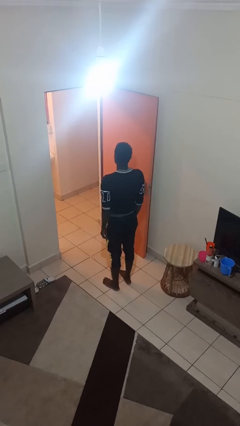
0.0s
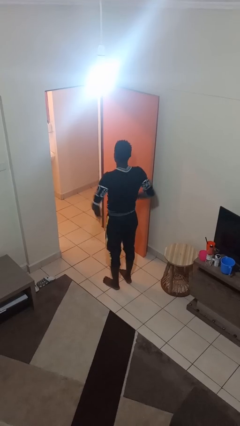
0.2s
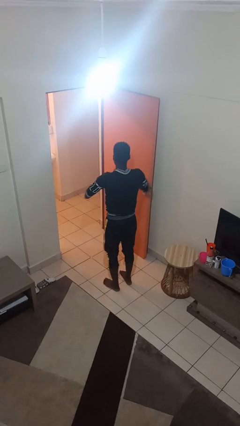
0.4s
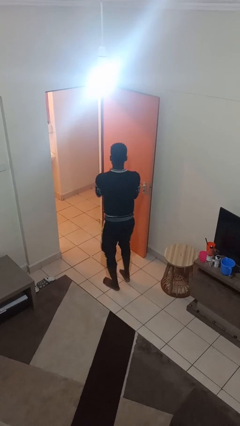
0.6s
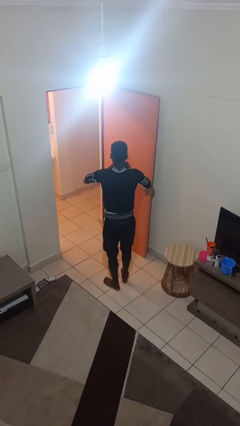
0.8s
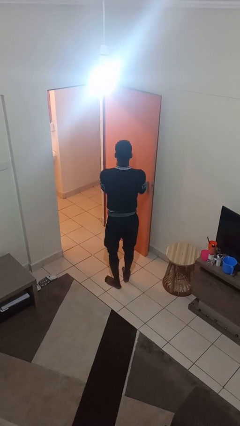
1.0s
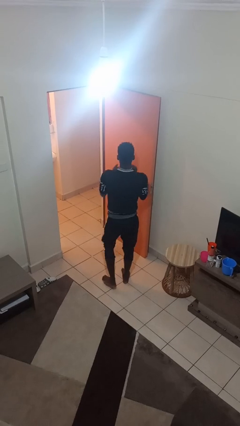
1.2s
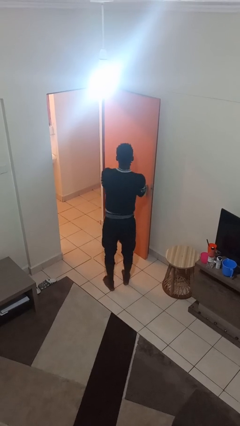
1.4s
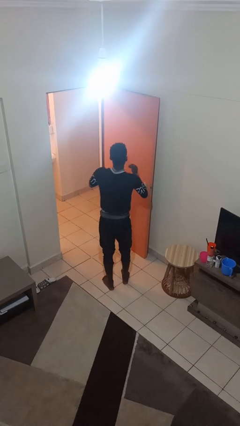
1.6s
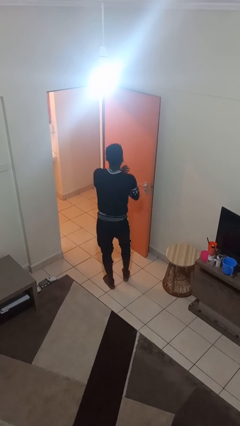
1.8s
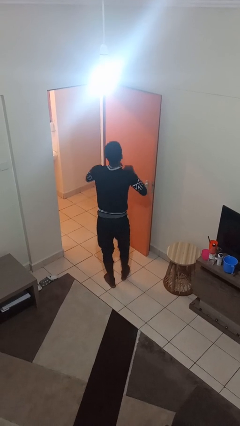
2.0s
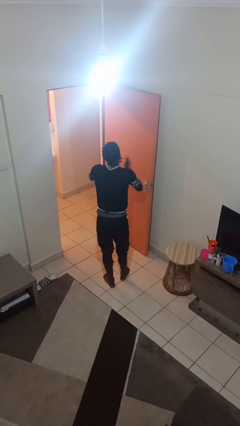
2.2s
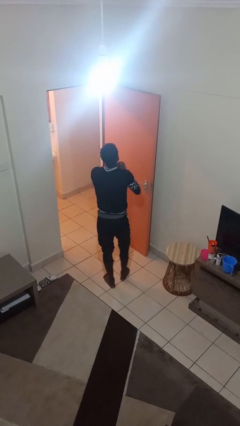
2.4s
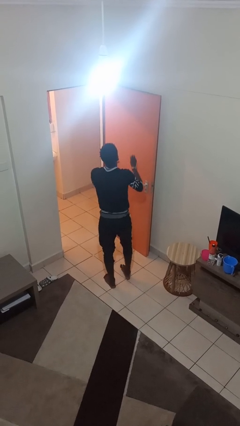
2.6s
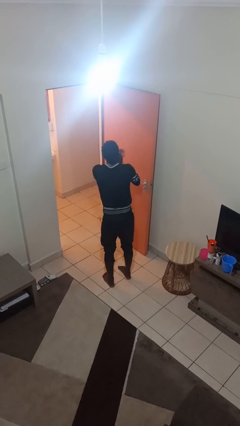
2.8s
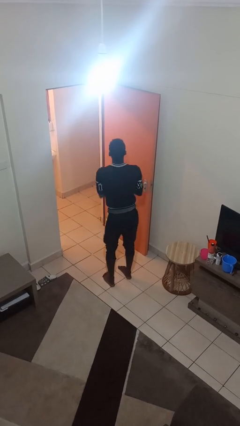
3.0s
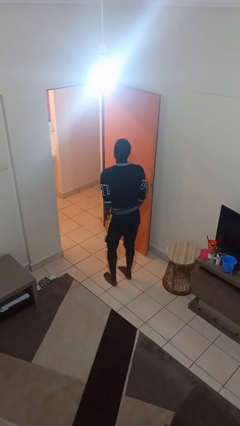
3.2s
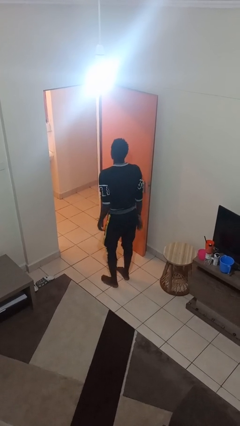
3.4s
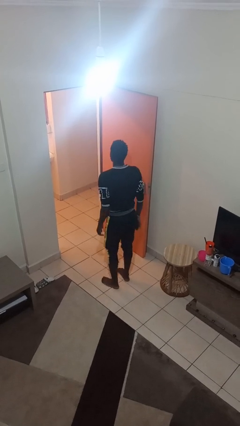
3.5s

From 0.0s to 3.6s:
person claps hands

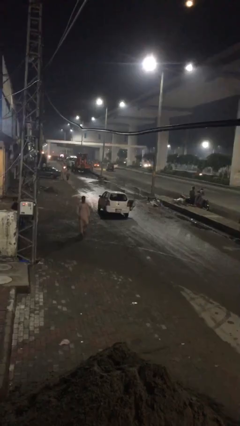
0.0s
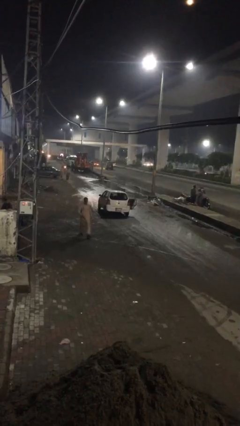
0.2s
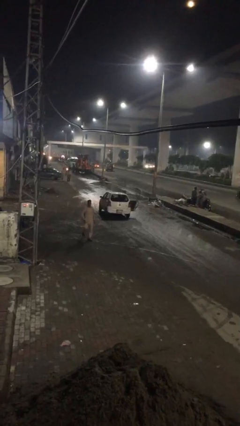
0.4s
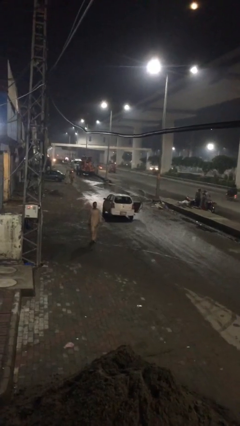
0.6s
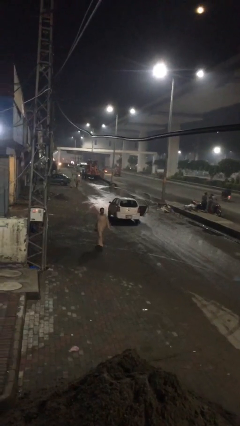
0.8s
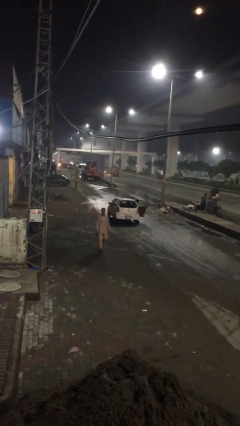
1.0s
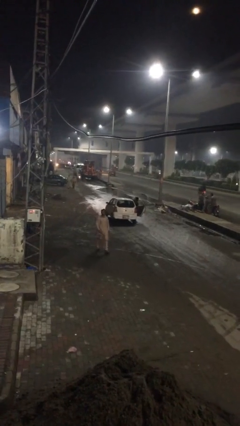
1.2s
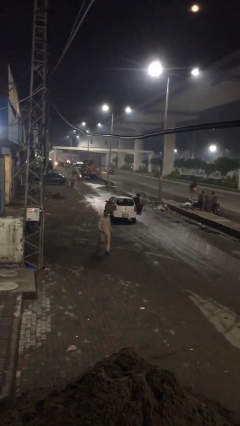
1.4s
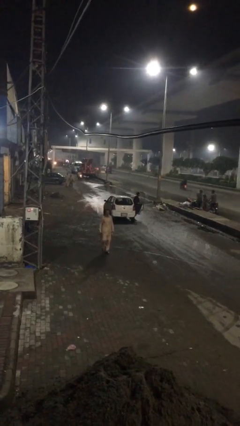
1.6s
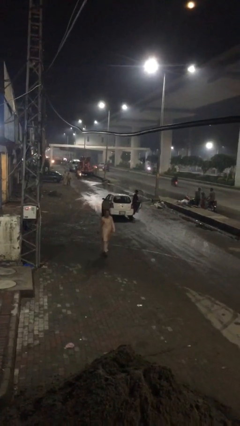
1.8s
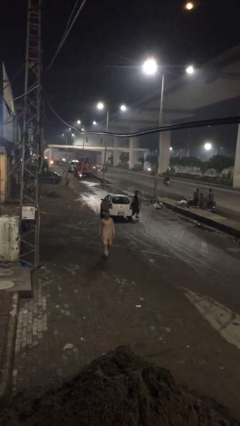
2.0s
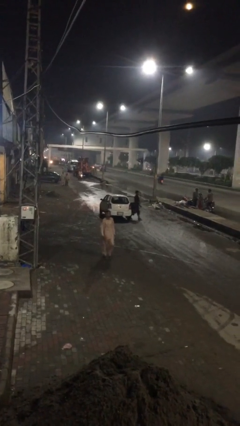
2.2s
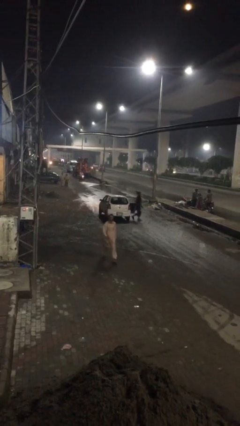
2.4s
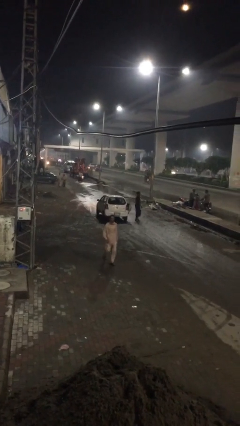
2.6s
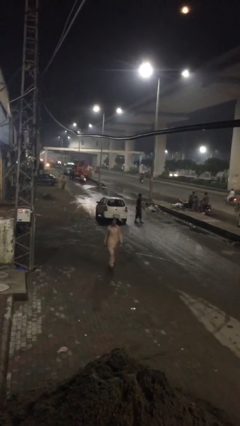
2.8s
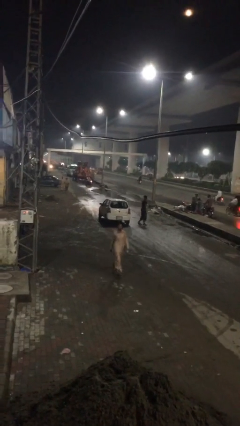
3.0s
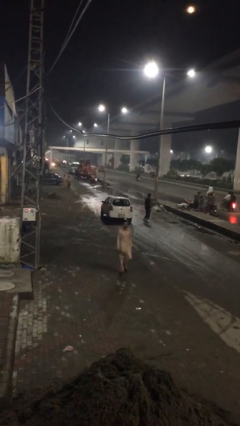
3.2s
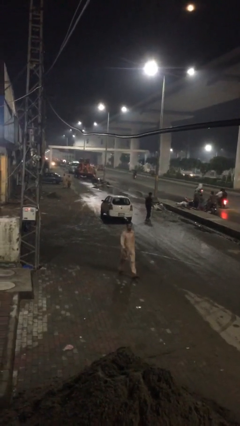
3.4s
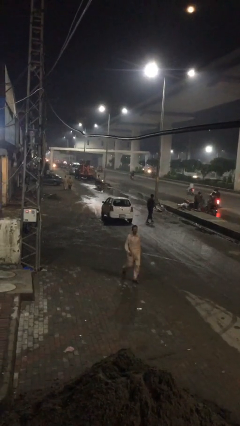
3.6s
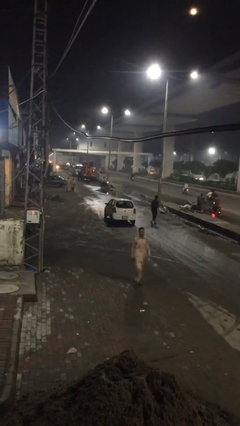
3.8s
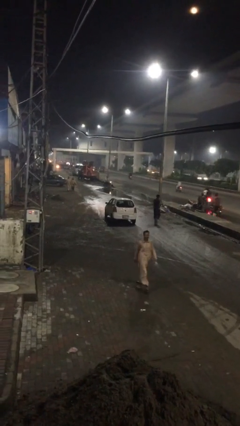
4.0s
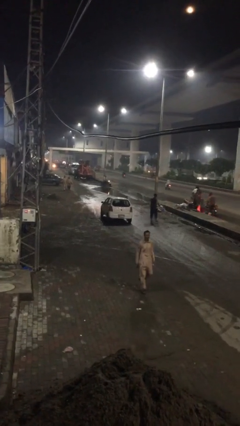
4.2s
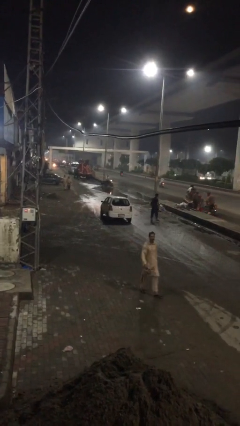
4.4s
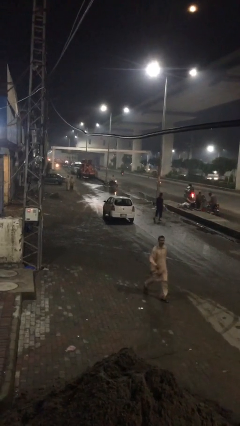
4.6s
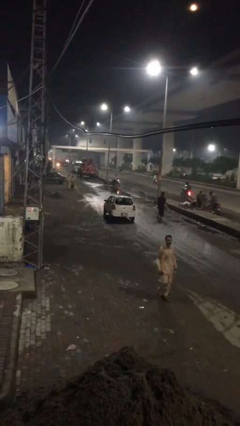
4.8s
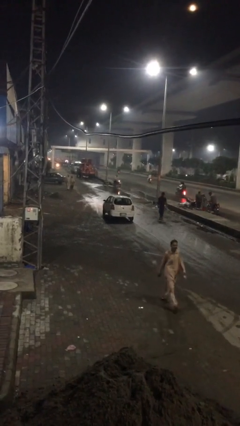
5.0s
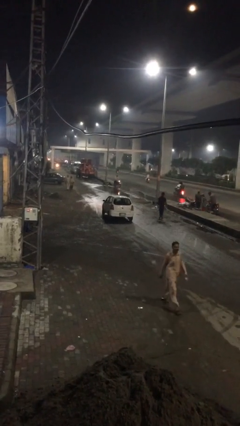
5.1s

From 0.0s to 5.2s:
car drops off person

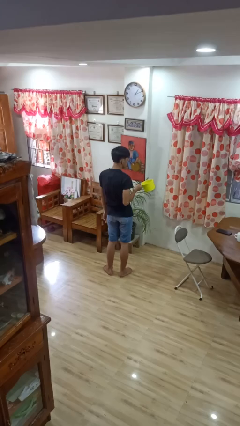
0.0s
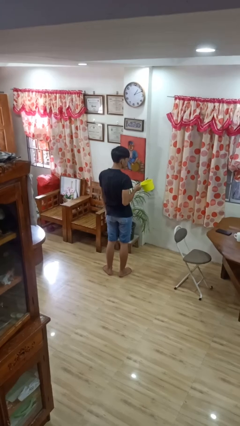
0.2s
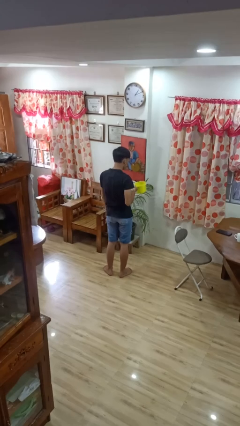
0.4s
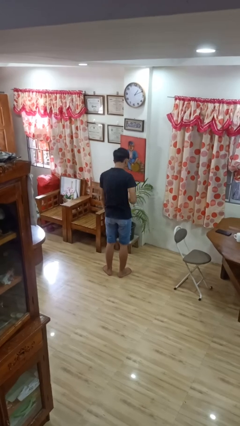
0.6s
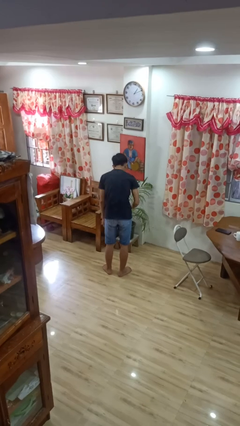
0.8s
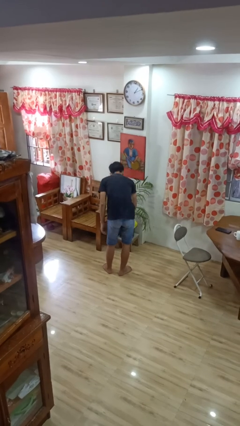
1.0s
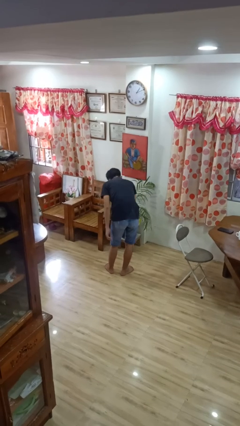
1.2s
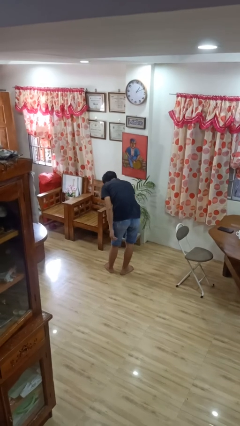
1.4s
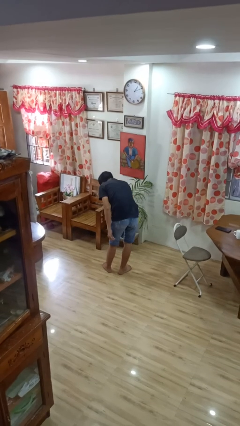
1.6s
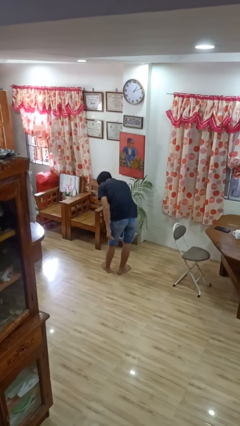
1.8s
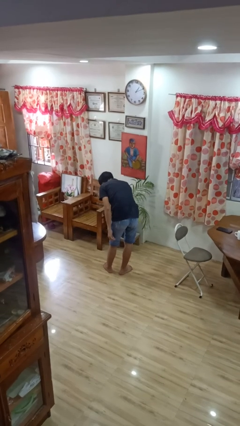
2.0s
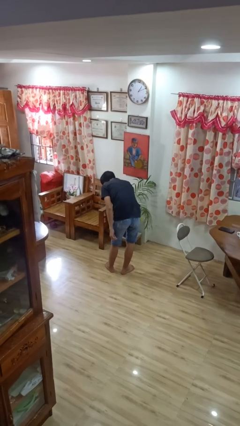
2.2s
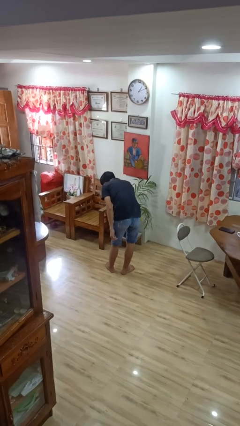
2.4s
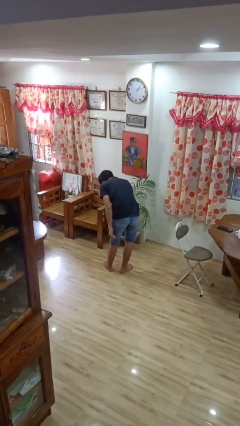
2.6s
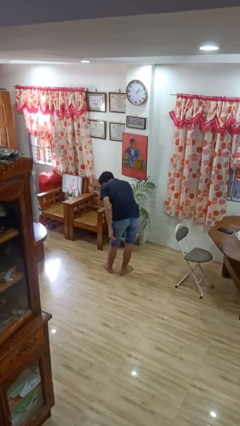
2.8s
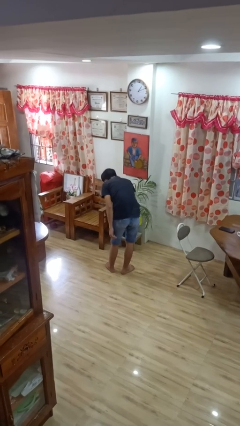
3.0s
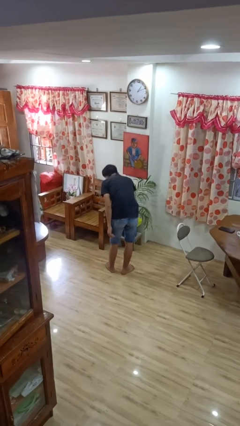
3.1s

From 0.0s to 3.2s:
person waters houseplant

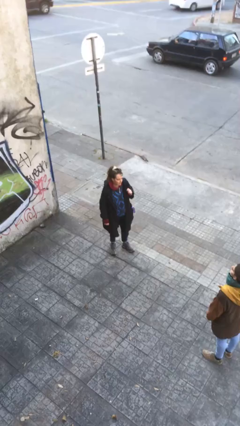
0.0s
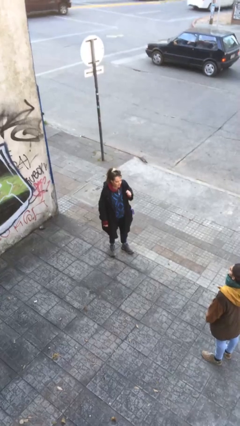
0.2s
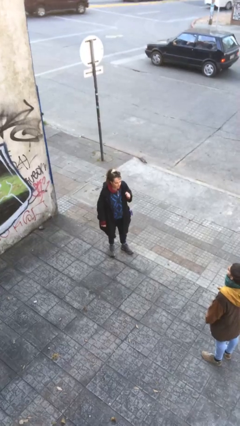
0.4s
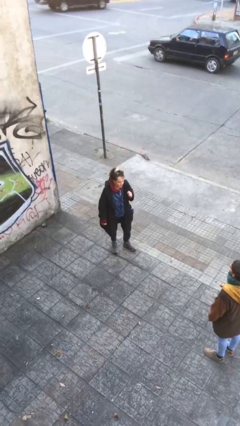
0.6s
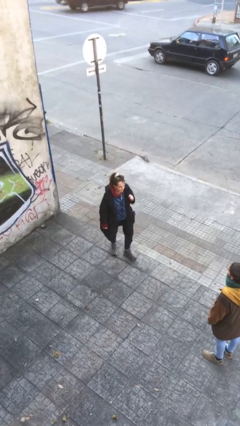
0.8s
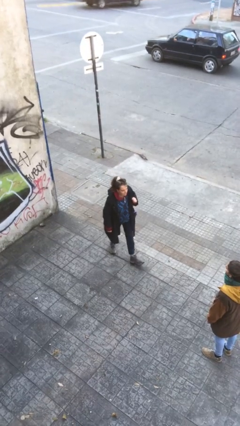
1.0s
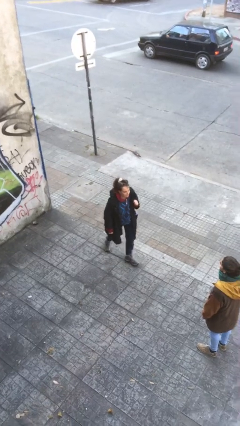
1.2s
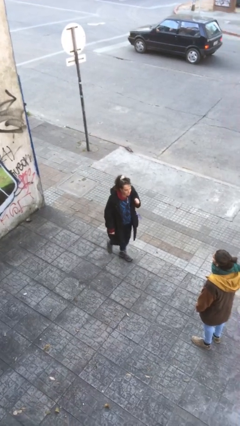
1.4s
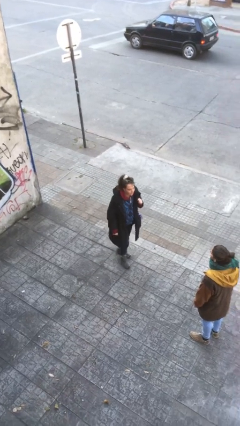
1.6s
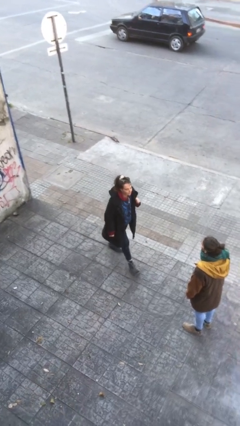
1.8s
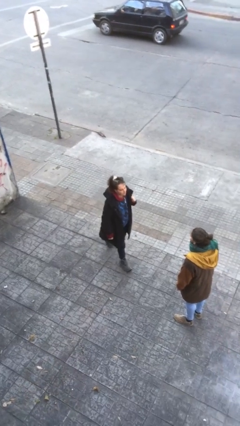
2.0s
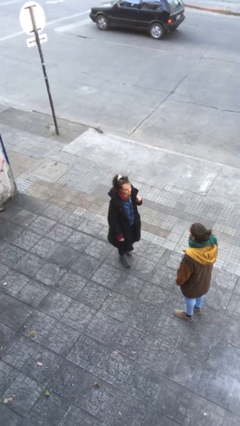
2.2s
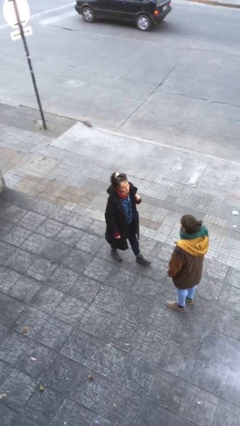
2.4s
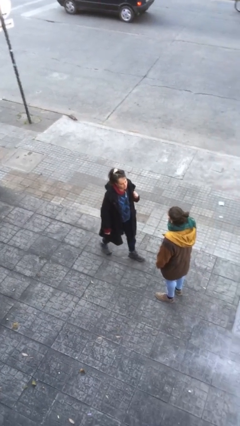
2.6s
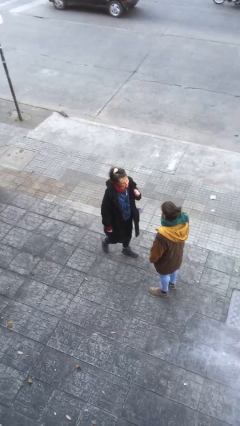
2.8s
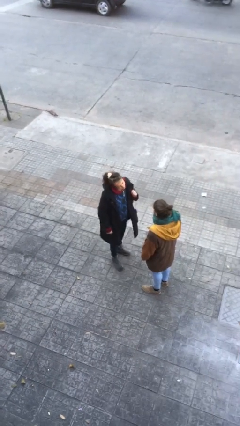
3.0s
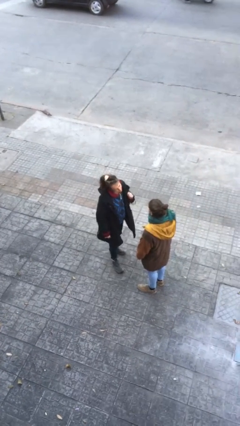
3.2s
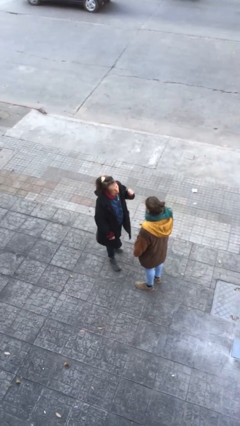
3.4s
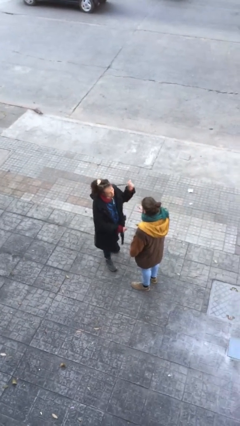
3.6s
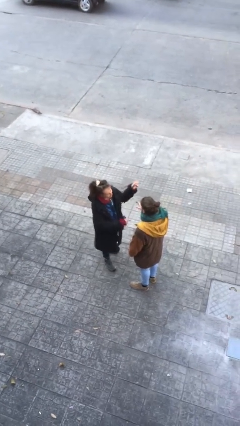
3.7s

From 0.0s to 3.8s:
person transfers object to person

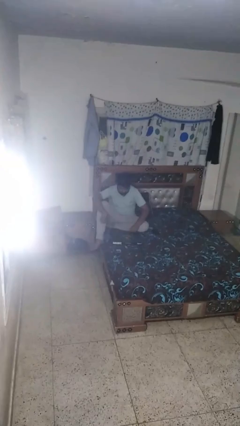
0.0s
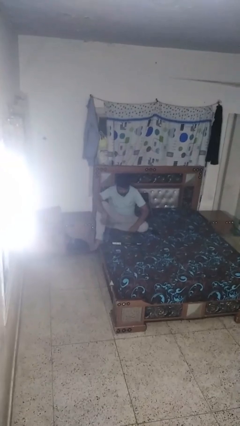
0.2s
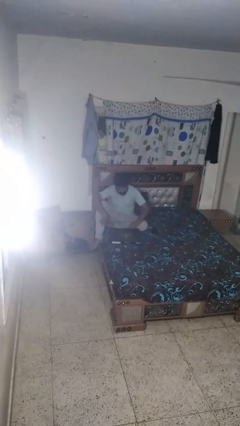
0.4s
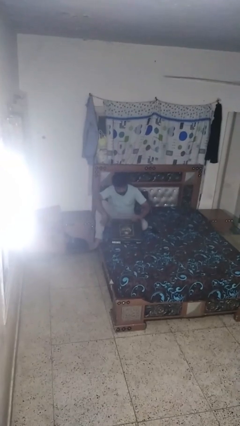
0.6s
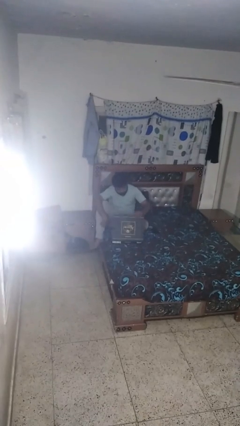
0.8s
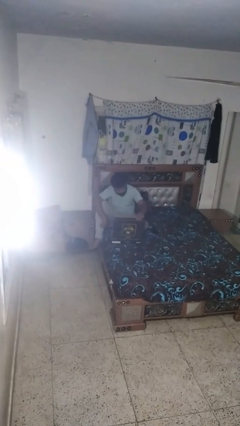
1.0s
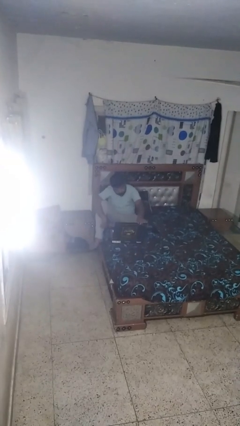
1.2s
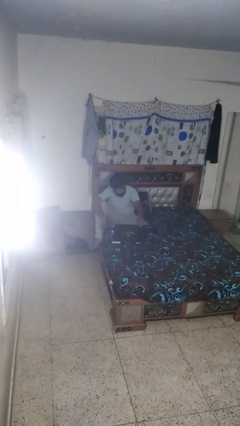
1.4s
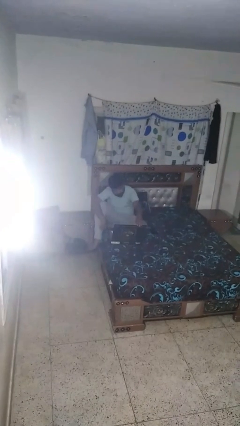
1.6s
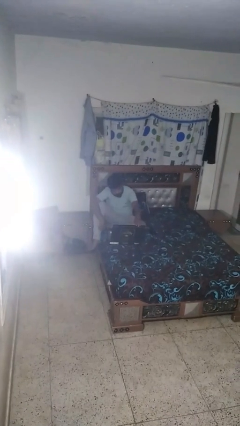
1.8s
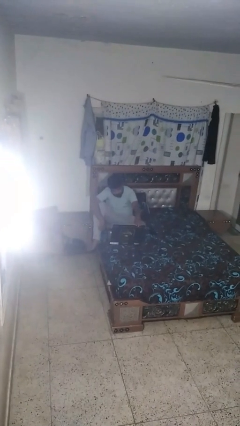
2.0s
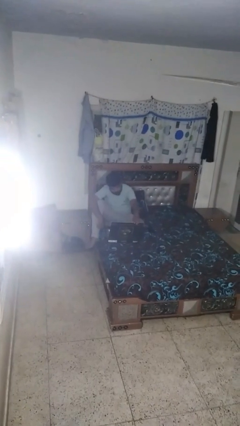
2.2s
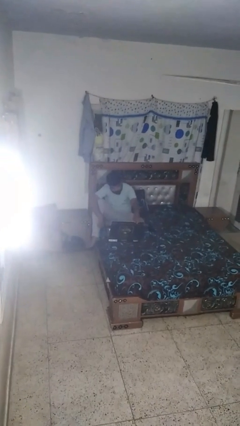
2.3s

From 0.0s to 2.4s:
person opens laptop
